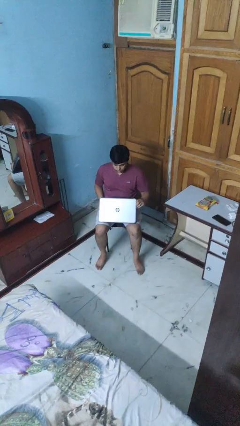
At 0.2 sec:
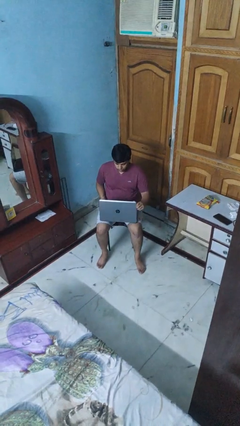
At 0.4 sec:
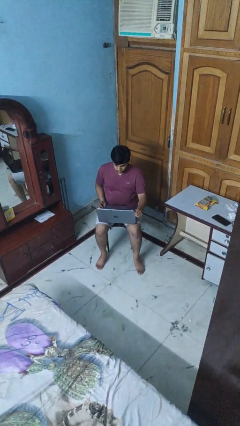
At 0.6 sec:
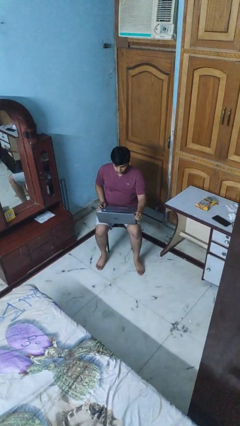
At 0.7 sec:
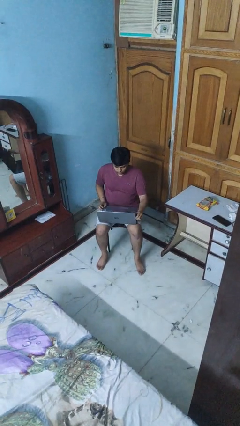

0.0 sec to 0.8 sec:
person opens laptop

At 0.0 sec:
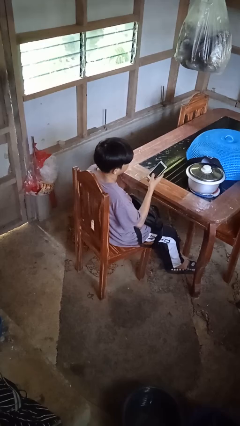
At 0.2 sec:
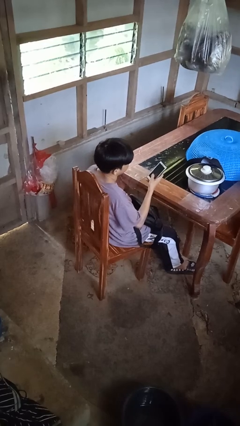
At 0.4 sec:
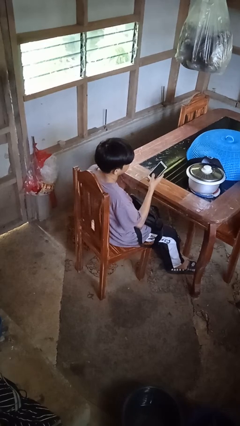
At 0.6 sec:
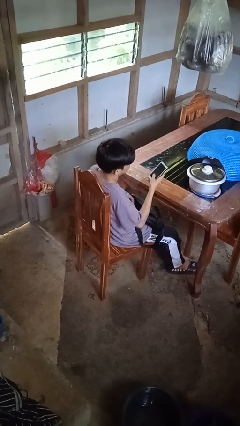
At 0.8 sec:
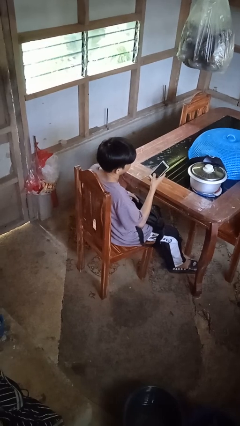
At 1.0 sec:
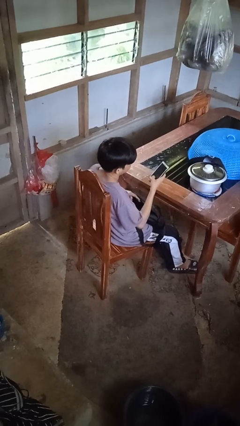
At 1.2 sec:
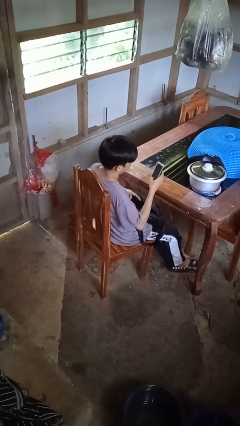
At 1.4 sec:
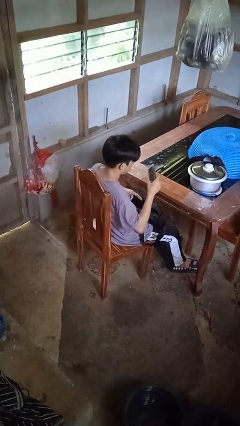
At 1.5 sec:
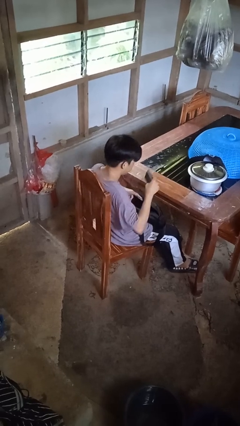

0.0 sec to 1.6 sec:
person puts object into purse

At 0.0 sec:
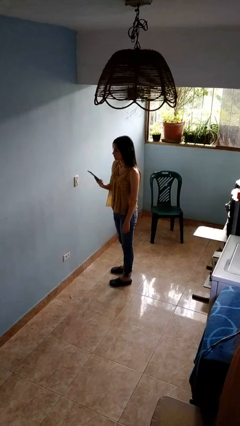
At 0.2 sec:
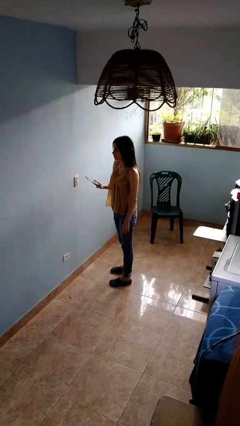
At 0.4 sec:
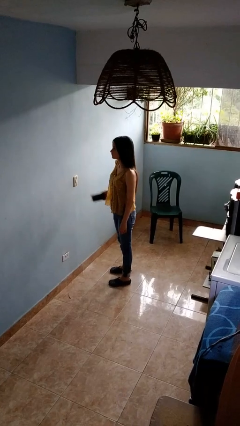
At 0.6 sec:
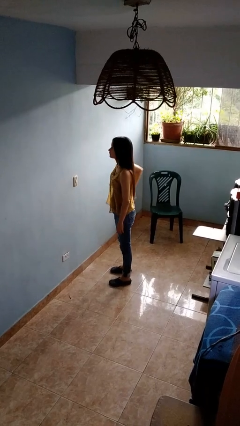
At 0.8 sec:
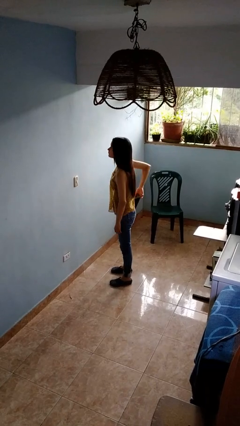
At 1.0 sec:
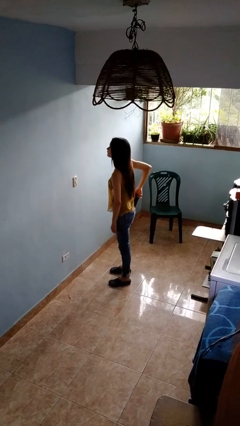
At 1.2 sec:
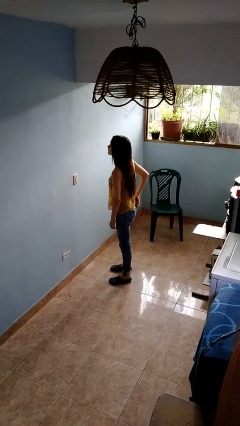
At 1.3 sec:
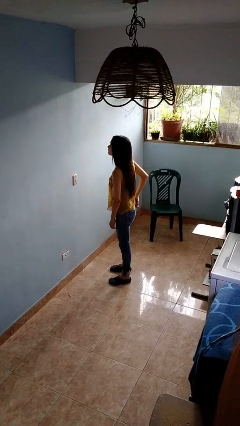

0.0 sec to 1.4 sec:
person puts phone into pocket

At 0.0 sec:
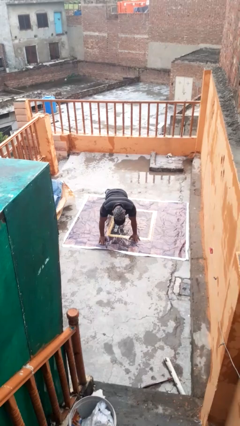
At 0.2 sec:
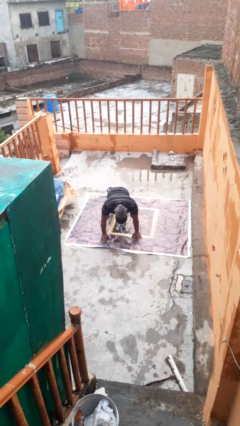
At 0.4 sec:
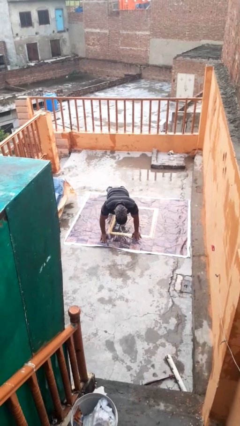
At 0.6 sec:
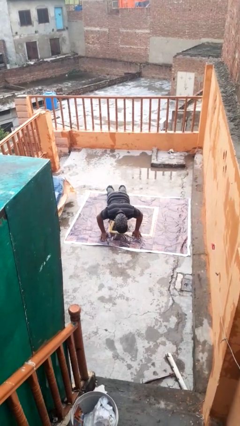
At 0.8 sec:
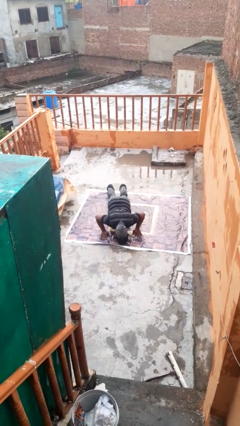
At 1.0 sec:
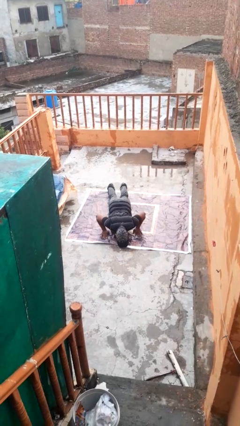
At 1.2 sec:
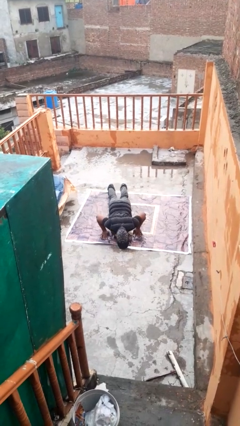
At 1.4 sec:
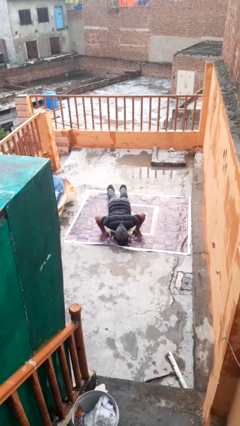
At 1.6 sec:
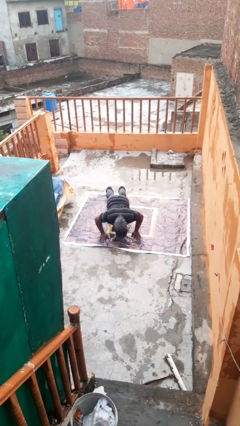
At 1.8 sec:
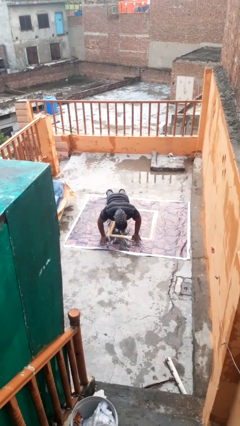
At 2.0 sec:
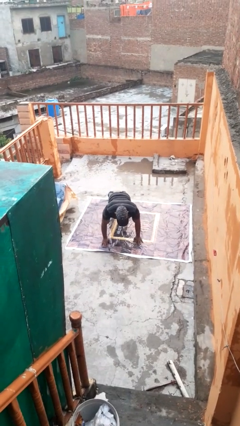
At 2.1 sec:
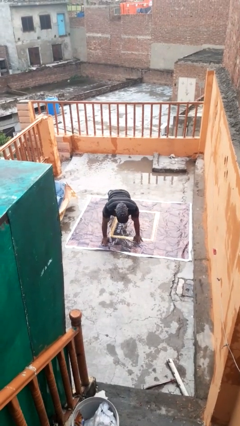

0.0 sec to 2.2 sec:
person exercises with pushup

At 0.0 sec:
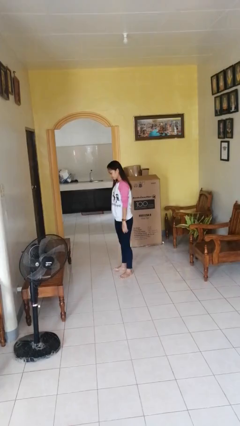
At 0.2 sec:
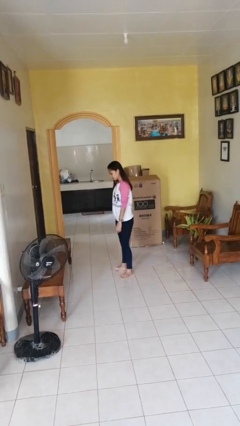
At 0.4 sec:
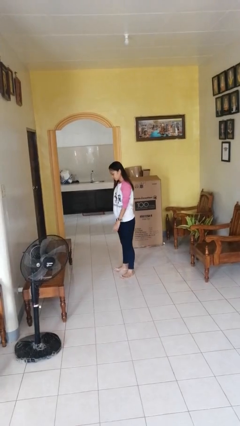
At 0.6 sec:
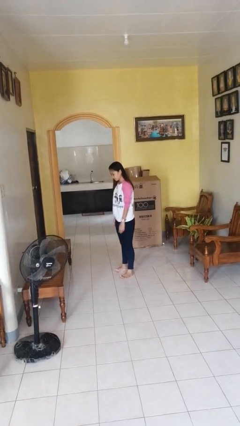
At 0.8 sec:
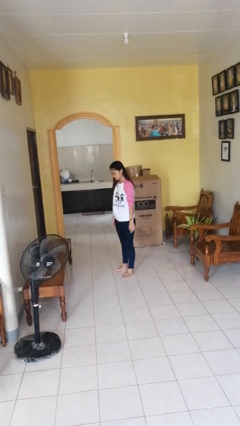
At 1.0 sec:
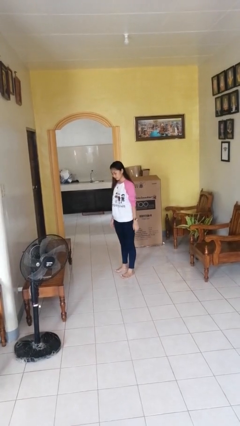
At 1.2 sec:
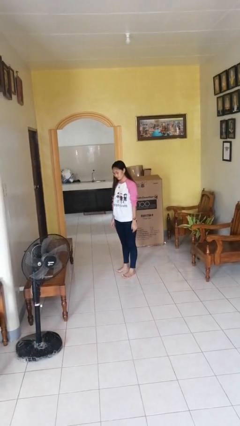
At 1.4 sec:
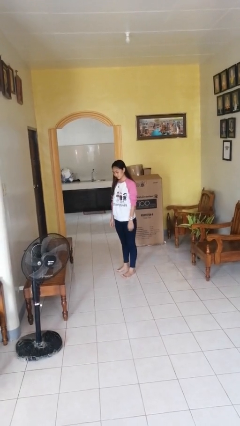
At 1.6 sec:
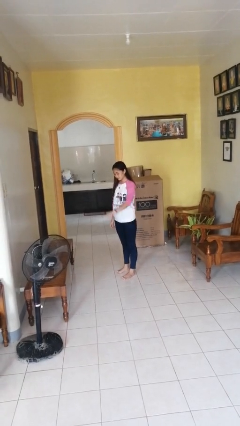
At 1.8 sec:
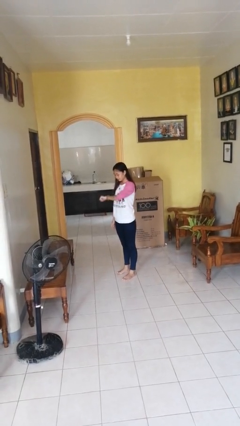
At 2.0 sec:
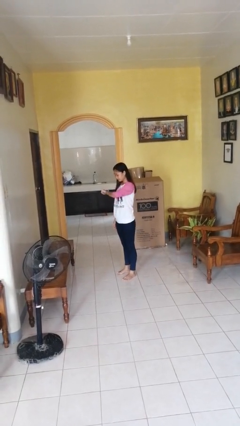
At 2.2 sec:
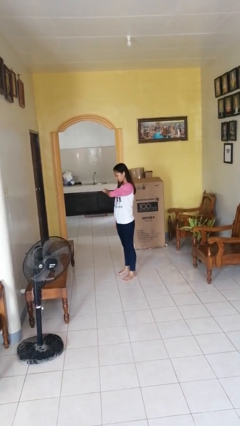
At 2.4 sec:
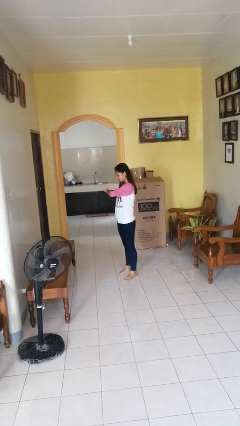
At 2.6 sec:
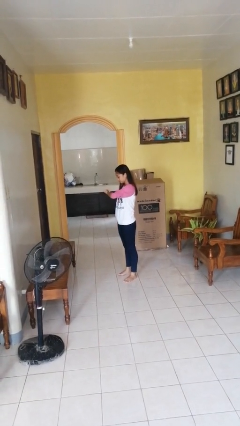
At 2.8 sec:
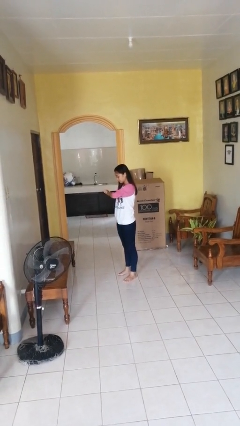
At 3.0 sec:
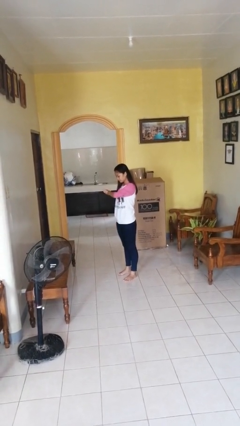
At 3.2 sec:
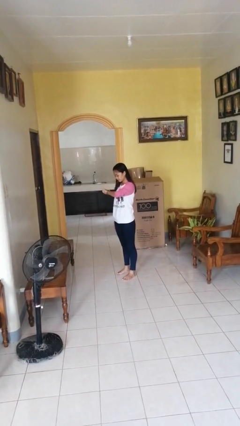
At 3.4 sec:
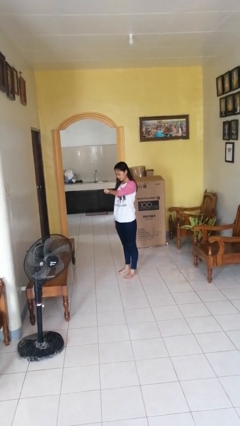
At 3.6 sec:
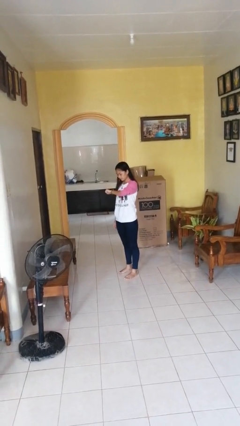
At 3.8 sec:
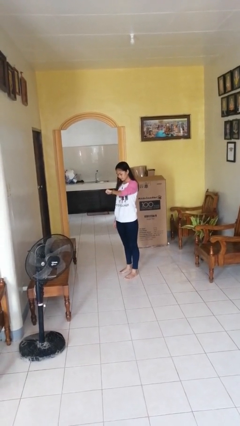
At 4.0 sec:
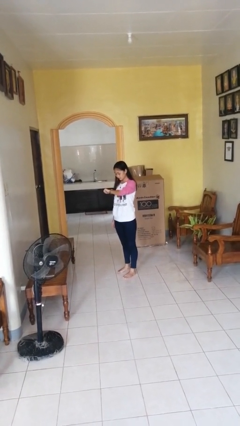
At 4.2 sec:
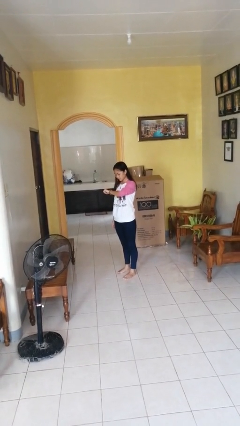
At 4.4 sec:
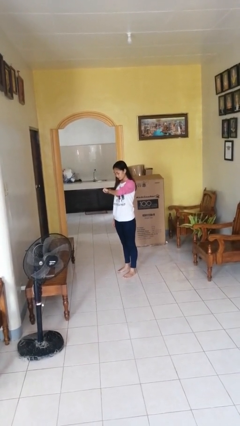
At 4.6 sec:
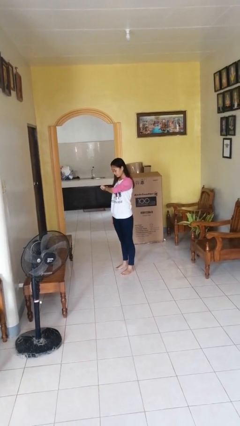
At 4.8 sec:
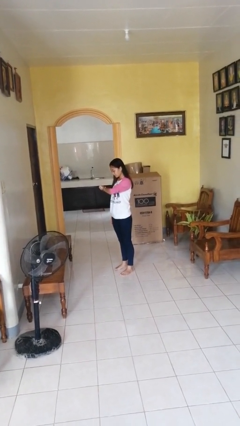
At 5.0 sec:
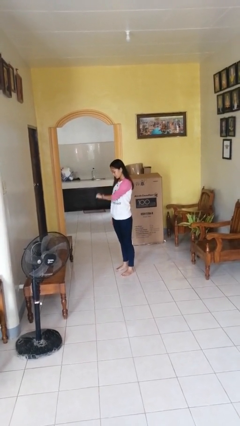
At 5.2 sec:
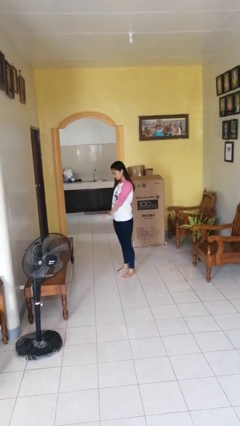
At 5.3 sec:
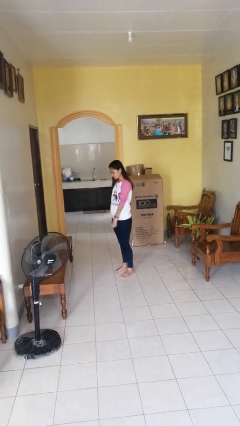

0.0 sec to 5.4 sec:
person looks at wristwatch

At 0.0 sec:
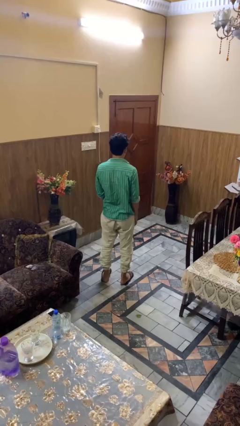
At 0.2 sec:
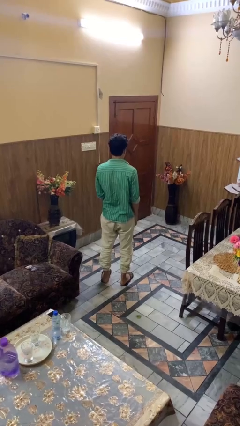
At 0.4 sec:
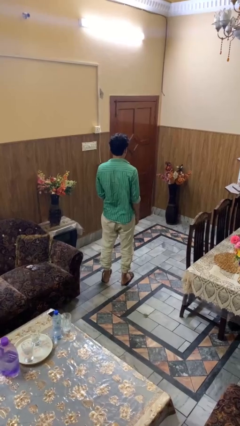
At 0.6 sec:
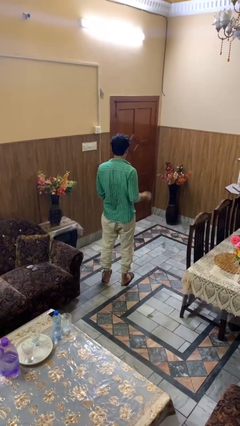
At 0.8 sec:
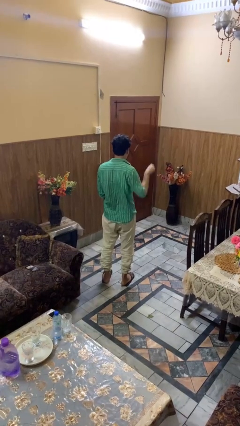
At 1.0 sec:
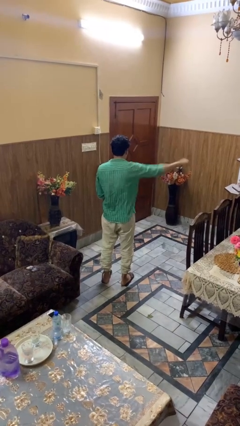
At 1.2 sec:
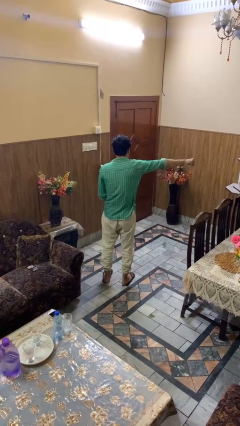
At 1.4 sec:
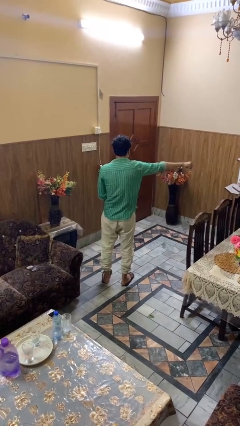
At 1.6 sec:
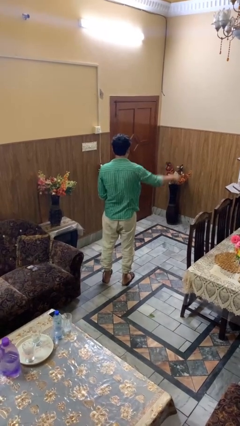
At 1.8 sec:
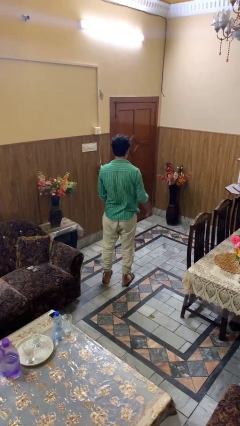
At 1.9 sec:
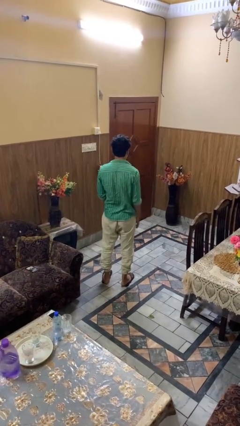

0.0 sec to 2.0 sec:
person punches

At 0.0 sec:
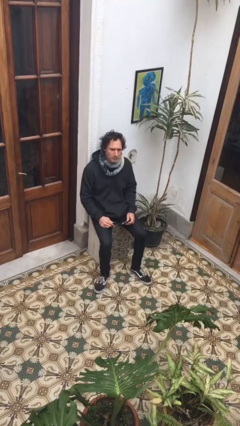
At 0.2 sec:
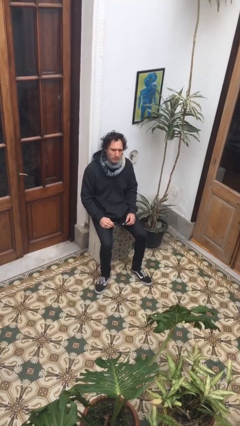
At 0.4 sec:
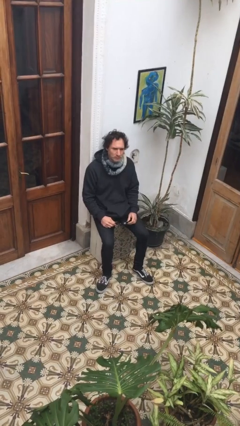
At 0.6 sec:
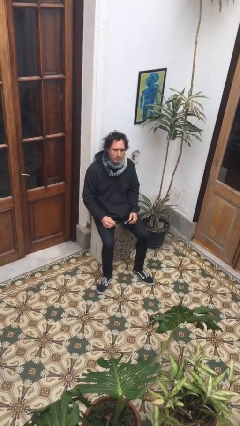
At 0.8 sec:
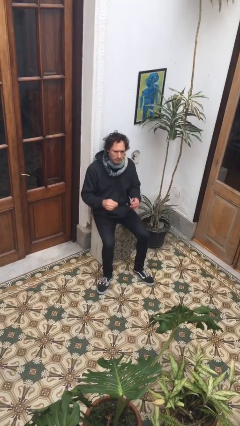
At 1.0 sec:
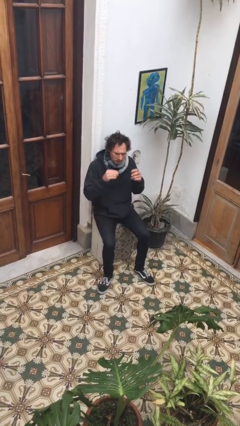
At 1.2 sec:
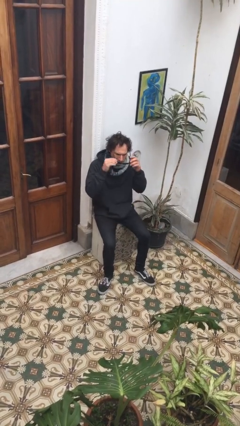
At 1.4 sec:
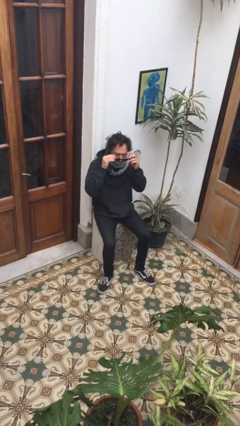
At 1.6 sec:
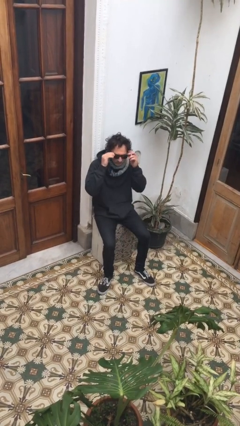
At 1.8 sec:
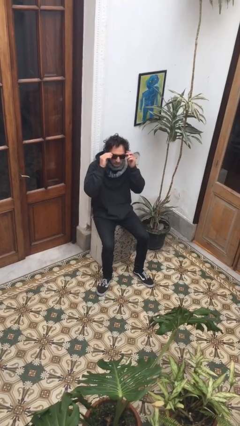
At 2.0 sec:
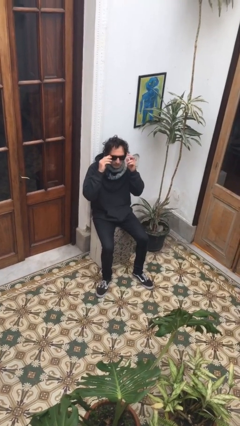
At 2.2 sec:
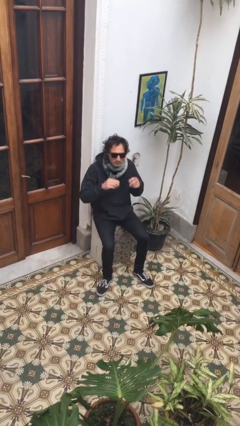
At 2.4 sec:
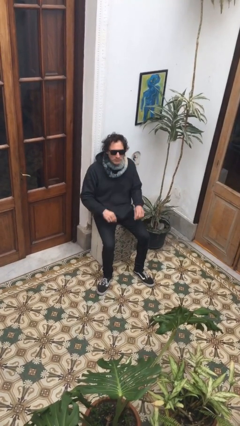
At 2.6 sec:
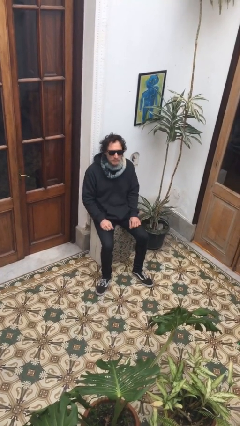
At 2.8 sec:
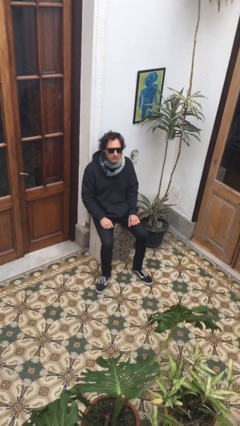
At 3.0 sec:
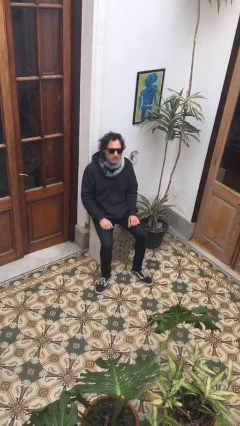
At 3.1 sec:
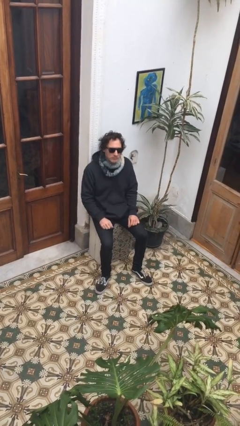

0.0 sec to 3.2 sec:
person puts on sunglasses
